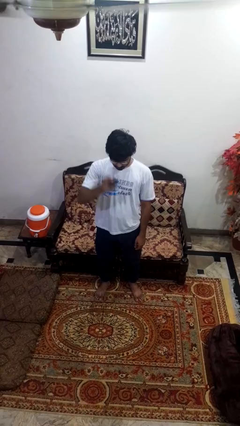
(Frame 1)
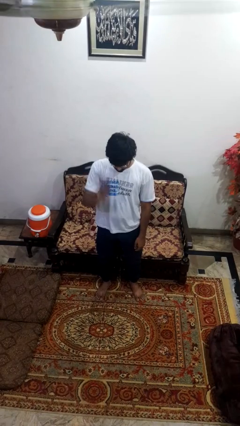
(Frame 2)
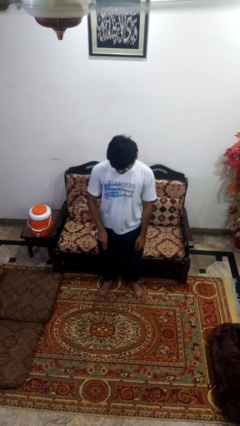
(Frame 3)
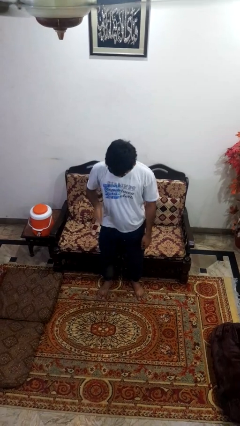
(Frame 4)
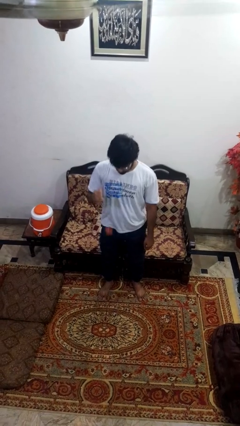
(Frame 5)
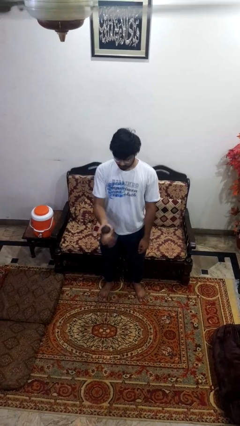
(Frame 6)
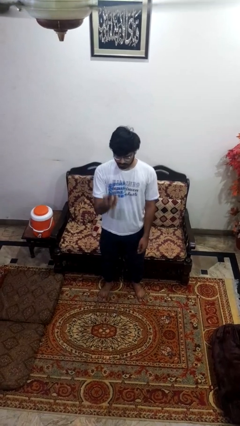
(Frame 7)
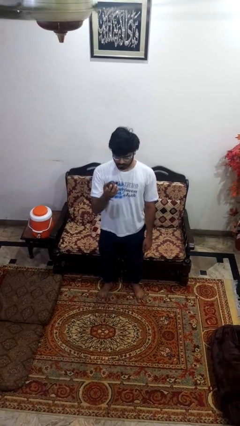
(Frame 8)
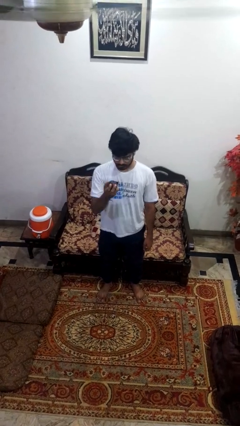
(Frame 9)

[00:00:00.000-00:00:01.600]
person bounces ball on floor

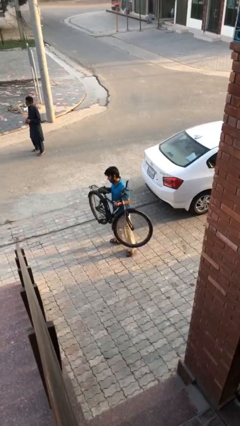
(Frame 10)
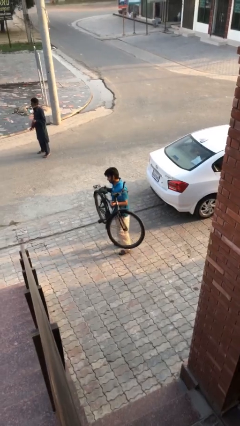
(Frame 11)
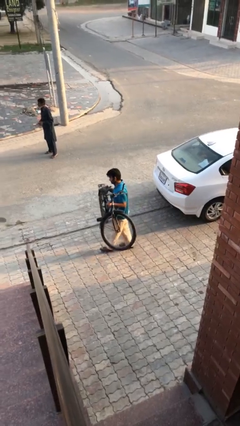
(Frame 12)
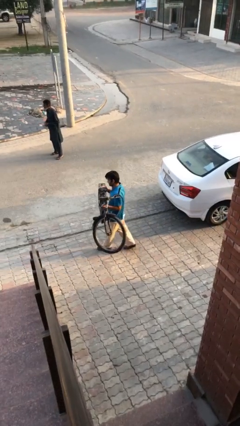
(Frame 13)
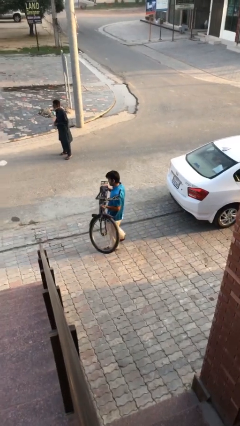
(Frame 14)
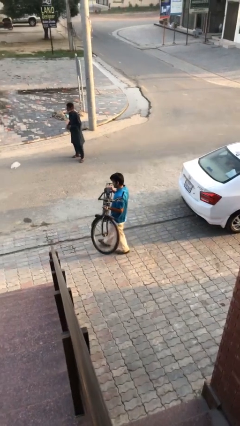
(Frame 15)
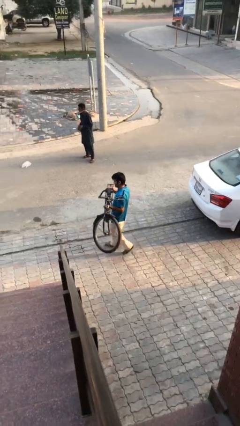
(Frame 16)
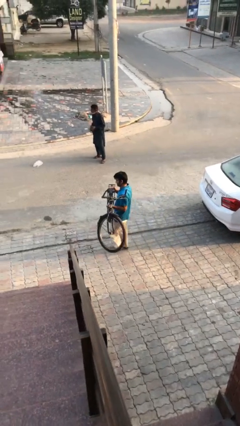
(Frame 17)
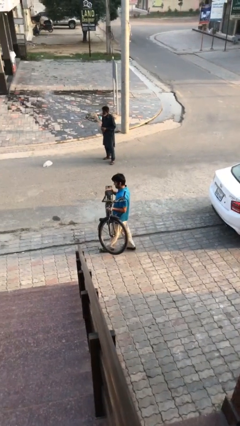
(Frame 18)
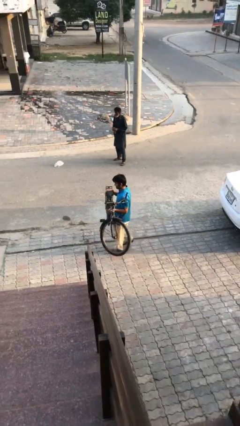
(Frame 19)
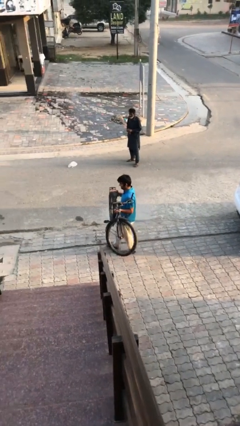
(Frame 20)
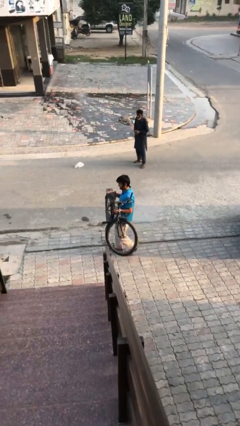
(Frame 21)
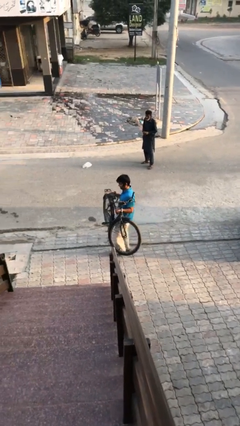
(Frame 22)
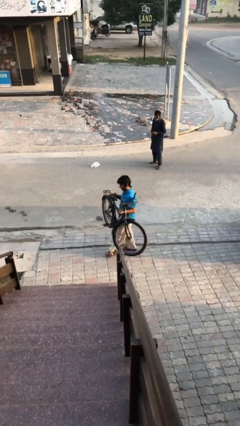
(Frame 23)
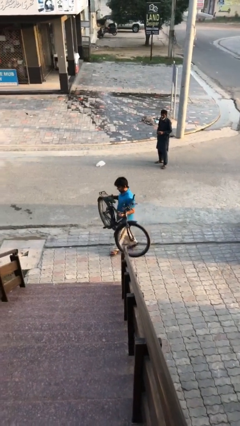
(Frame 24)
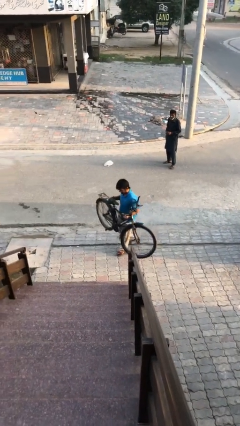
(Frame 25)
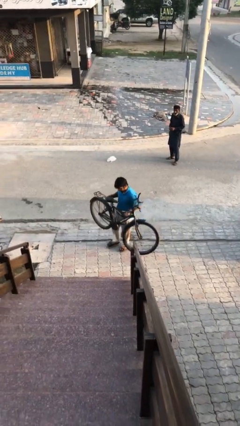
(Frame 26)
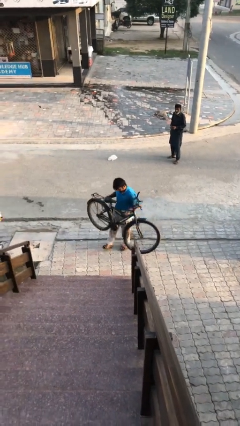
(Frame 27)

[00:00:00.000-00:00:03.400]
person carries heavy object

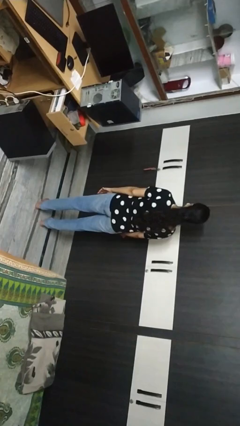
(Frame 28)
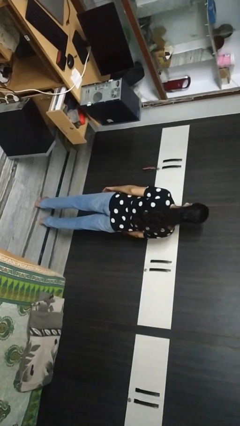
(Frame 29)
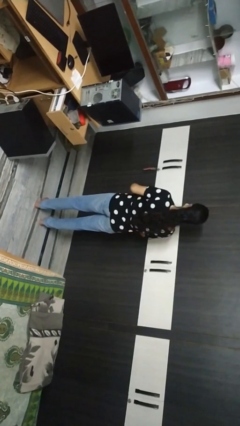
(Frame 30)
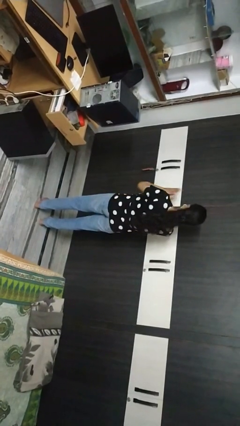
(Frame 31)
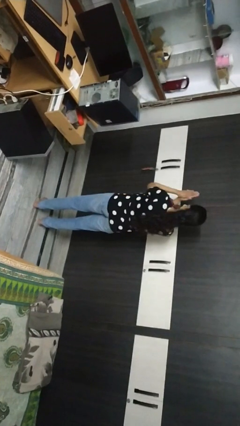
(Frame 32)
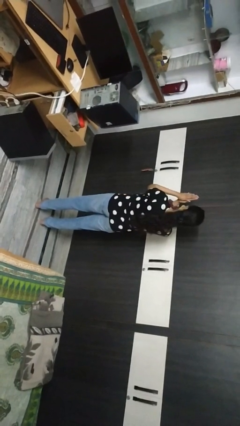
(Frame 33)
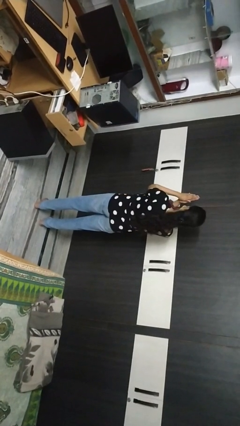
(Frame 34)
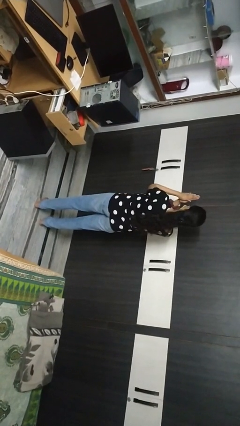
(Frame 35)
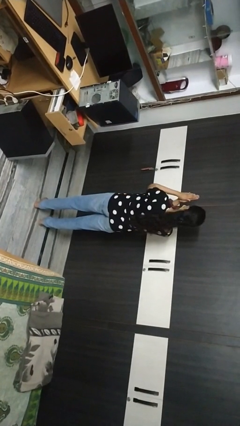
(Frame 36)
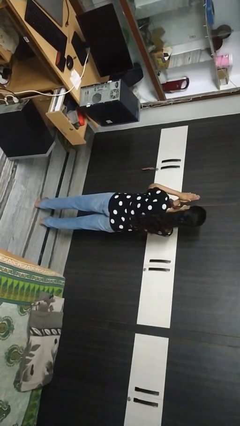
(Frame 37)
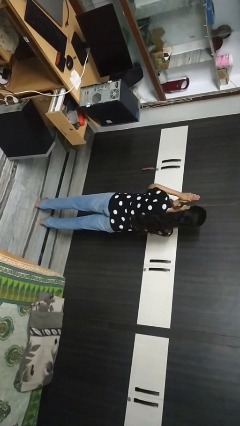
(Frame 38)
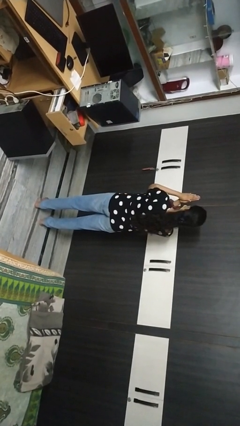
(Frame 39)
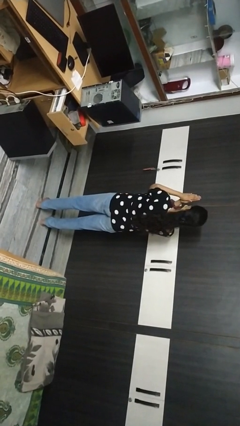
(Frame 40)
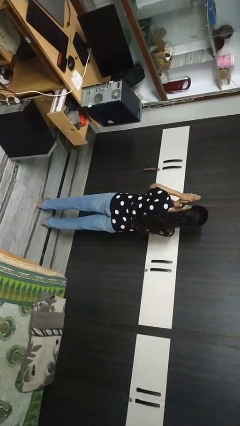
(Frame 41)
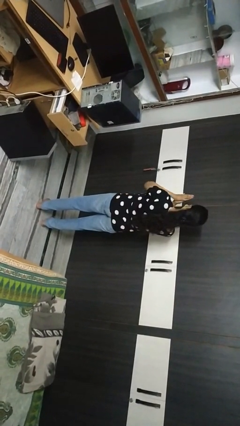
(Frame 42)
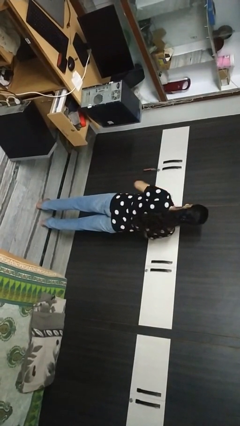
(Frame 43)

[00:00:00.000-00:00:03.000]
person prays

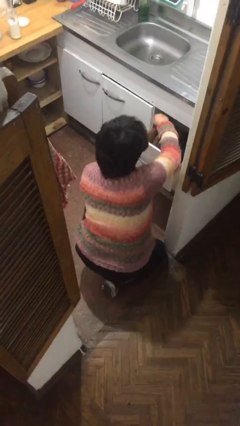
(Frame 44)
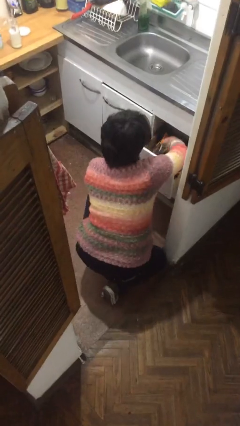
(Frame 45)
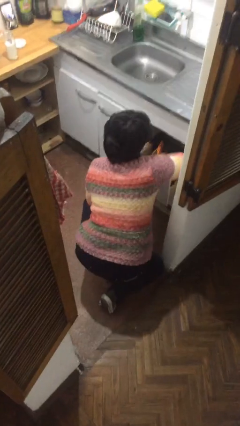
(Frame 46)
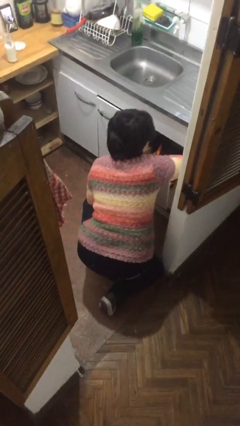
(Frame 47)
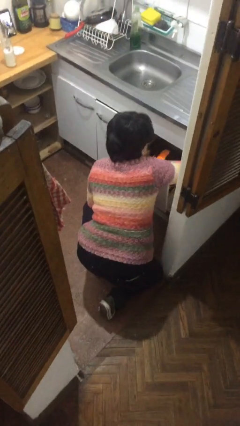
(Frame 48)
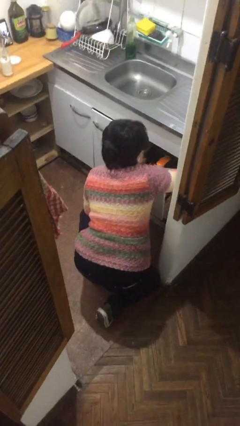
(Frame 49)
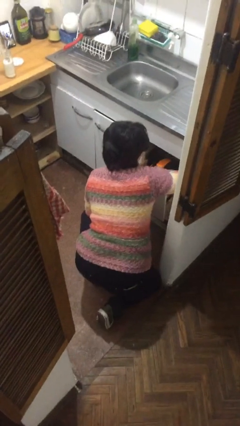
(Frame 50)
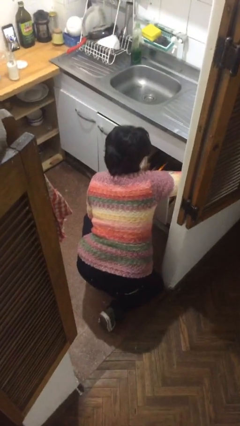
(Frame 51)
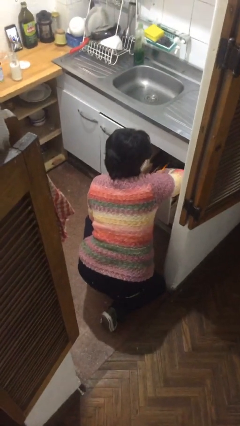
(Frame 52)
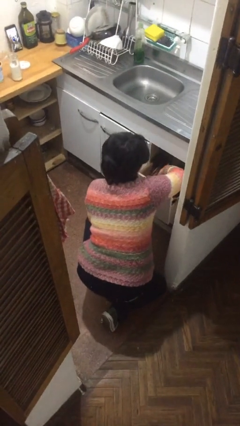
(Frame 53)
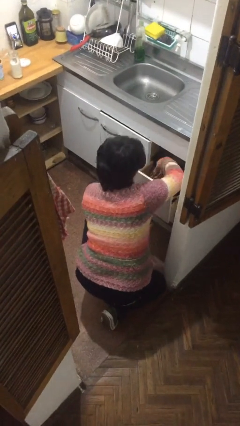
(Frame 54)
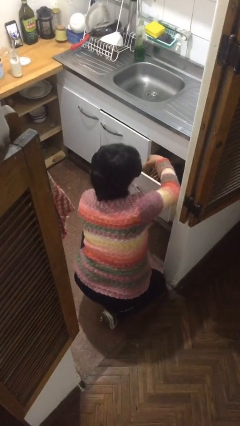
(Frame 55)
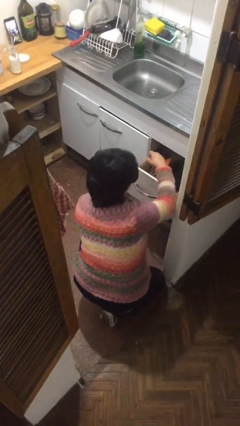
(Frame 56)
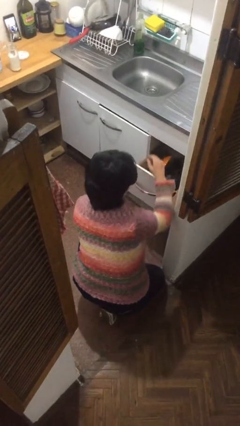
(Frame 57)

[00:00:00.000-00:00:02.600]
person searches in kitchen drawer

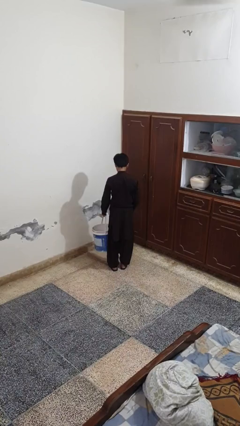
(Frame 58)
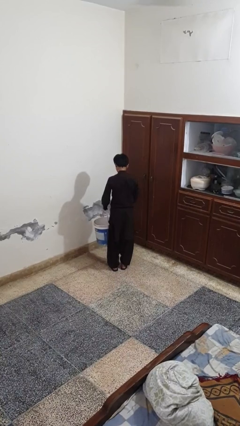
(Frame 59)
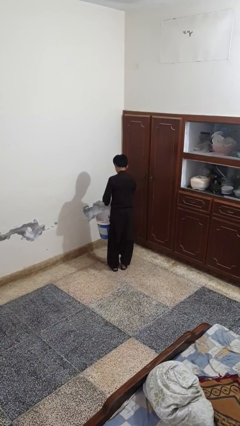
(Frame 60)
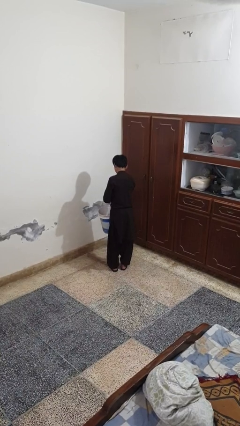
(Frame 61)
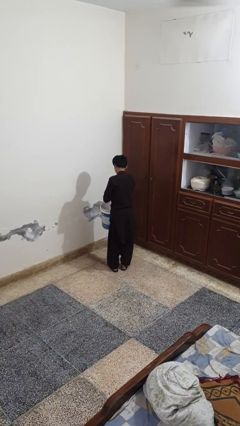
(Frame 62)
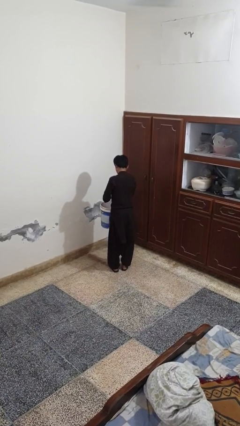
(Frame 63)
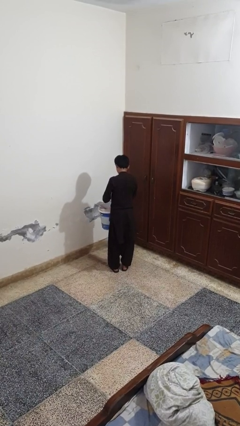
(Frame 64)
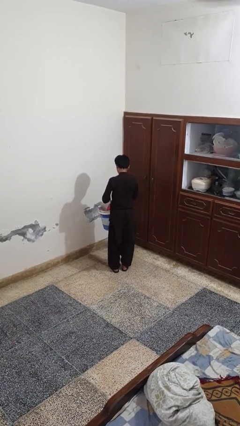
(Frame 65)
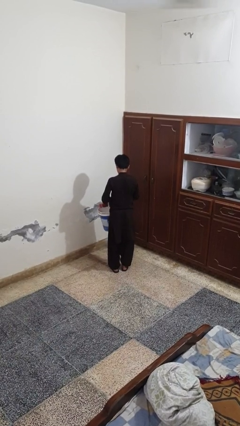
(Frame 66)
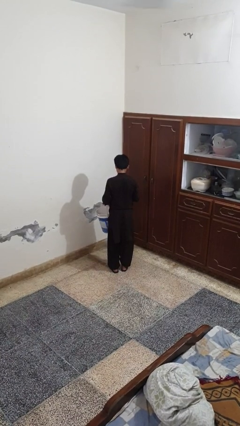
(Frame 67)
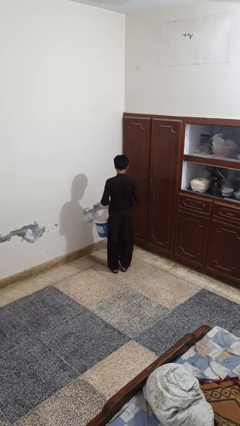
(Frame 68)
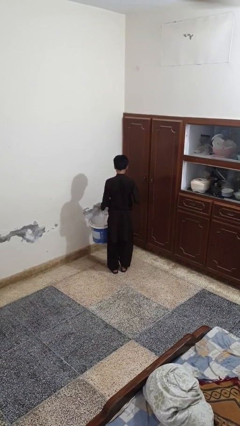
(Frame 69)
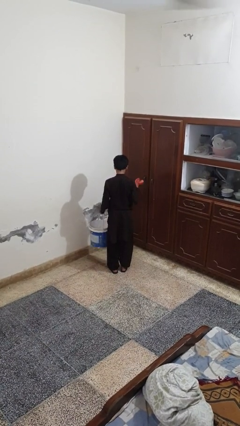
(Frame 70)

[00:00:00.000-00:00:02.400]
person takes object from basket

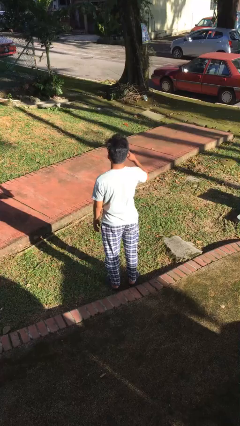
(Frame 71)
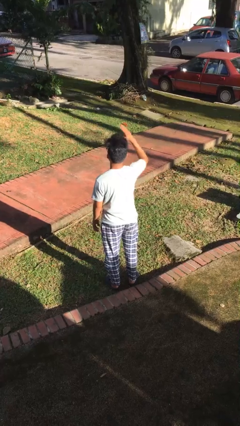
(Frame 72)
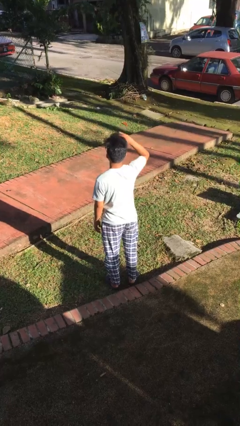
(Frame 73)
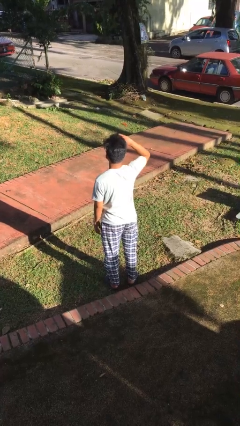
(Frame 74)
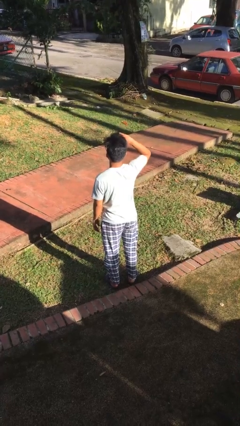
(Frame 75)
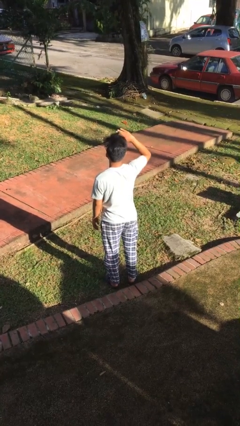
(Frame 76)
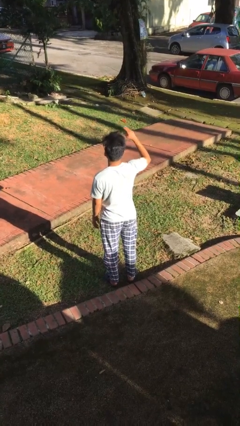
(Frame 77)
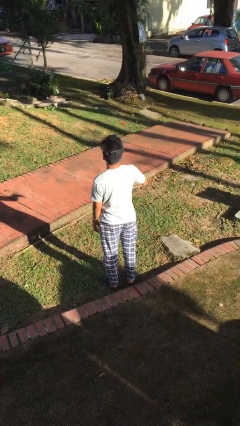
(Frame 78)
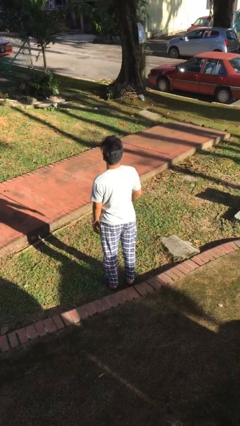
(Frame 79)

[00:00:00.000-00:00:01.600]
person salutes

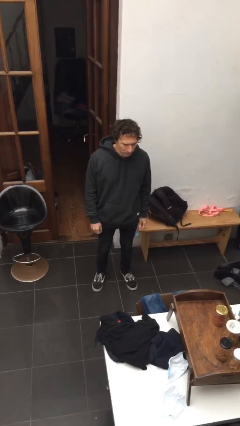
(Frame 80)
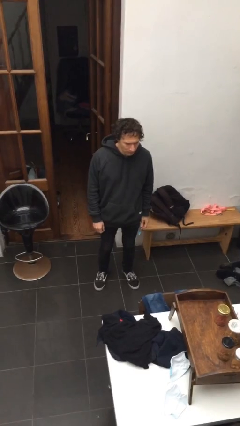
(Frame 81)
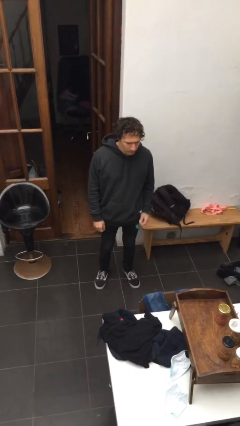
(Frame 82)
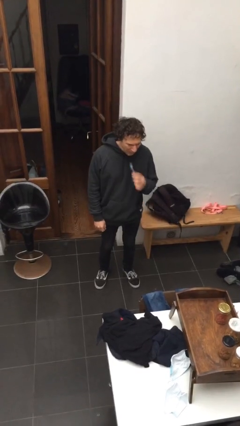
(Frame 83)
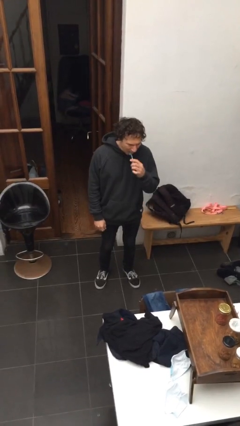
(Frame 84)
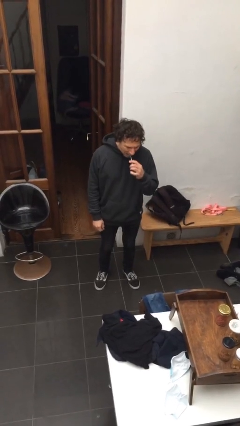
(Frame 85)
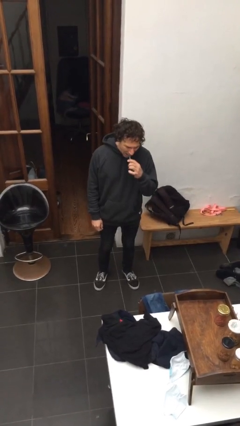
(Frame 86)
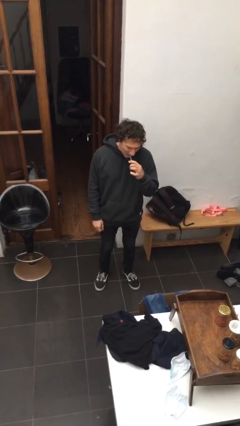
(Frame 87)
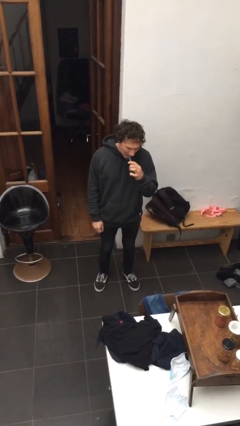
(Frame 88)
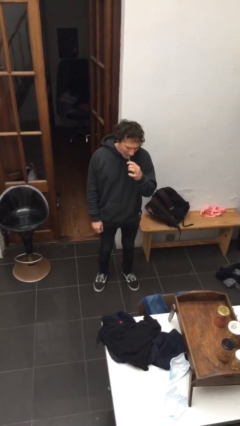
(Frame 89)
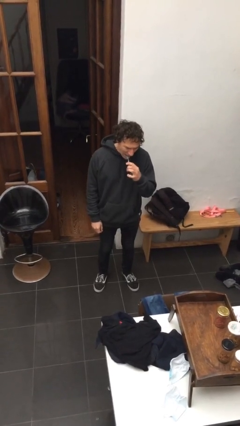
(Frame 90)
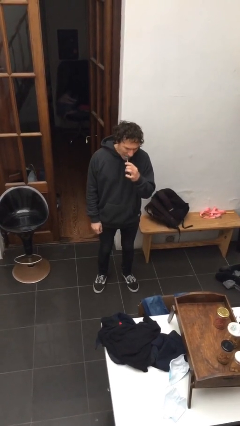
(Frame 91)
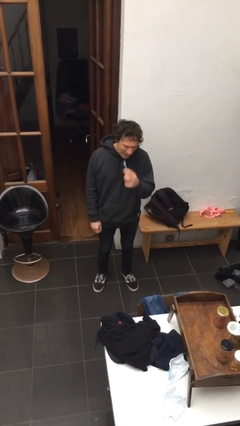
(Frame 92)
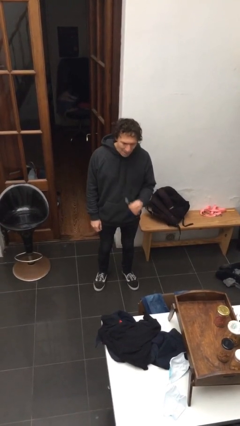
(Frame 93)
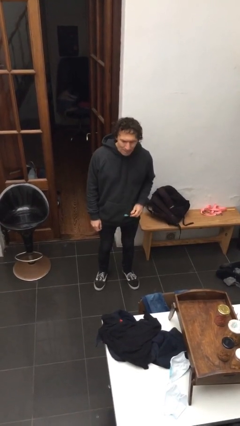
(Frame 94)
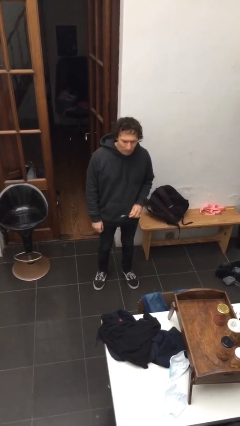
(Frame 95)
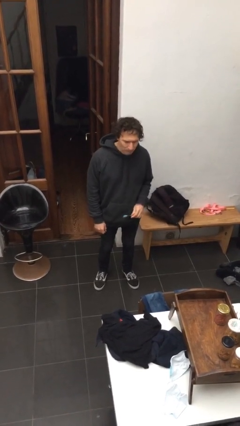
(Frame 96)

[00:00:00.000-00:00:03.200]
person flosses
